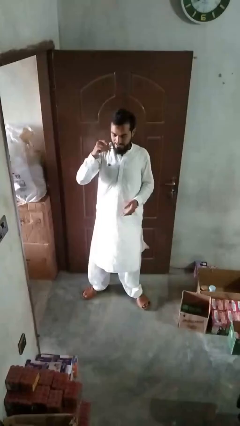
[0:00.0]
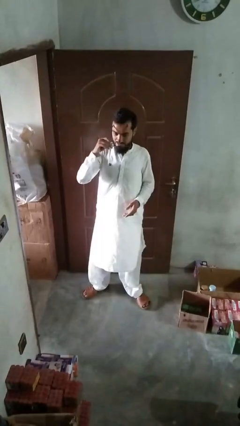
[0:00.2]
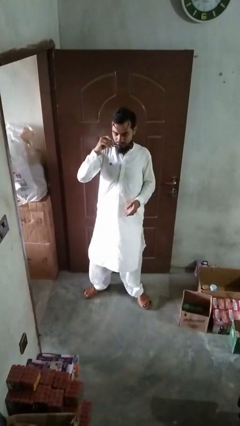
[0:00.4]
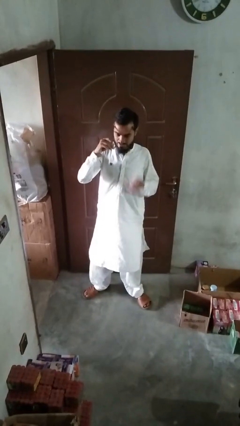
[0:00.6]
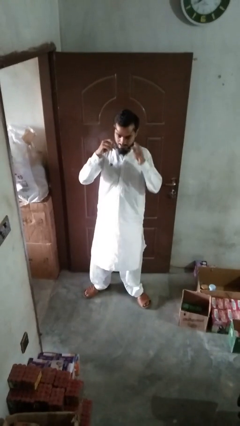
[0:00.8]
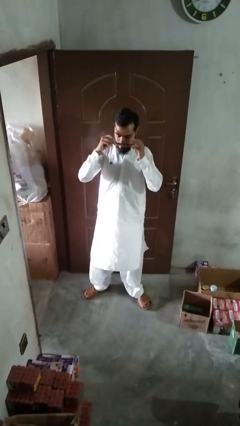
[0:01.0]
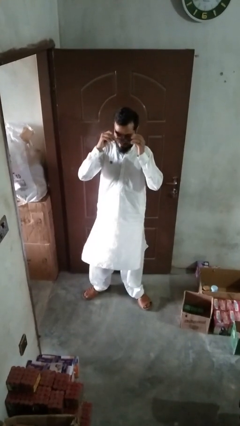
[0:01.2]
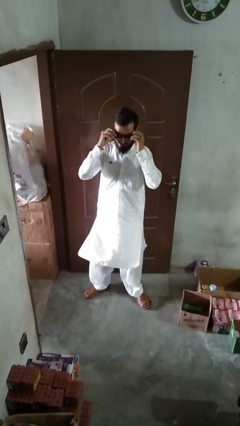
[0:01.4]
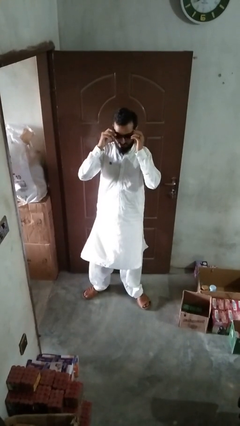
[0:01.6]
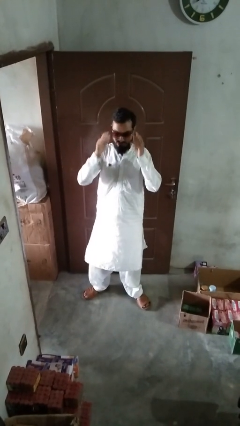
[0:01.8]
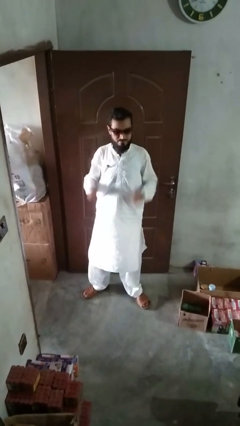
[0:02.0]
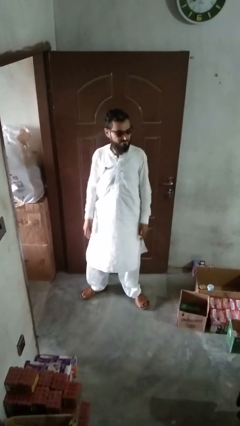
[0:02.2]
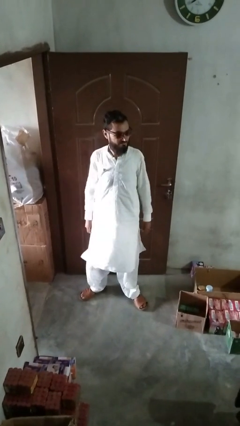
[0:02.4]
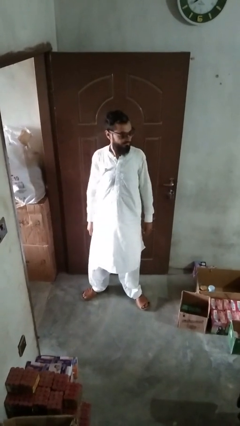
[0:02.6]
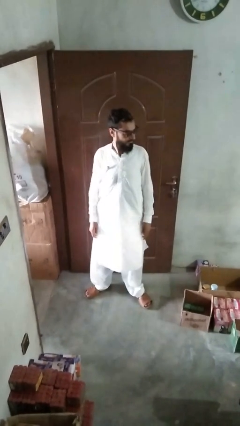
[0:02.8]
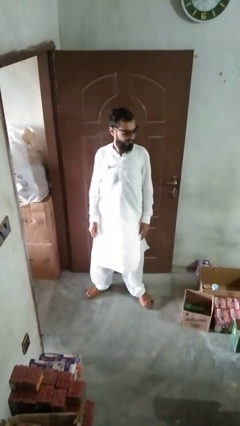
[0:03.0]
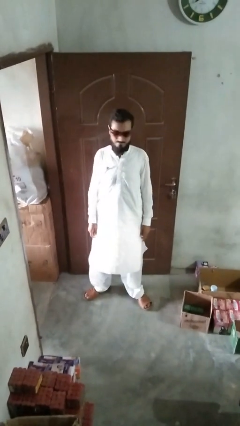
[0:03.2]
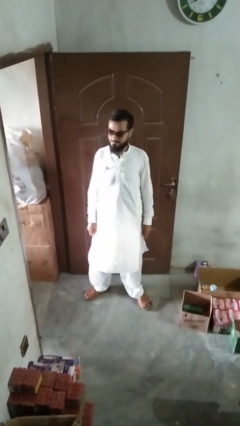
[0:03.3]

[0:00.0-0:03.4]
person puts on sunglasses

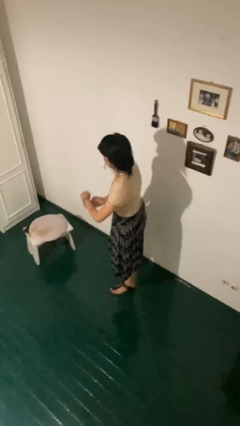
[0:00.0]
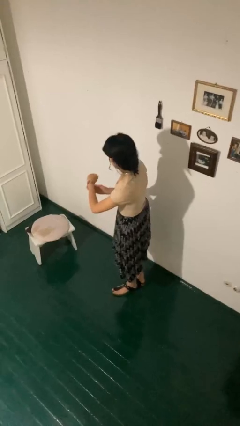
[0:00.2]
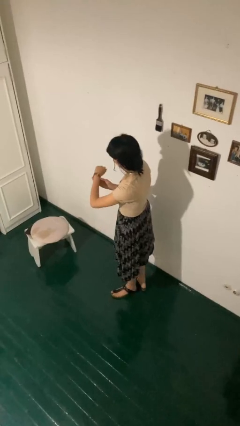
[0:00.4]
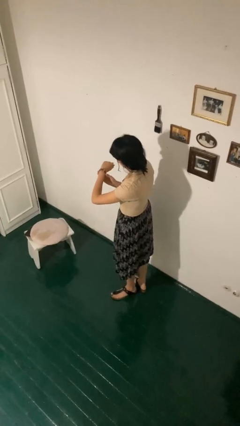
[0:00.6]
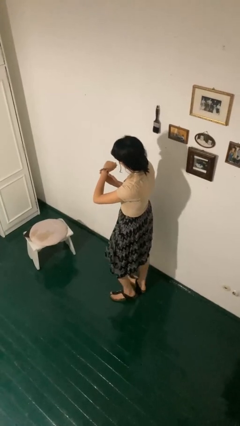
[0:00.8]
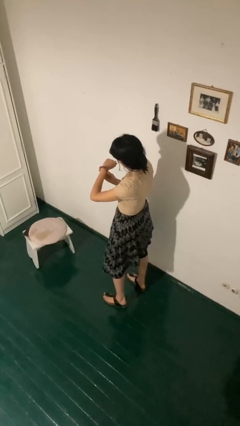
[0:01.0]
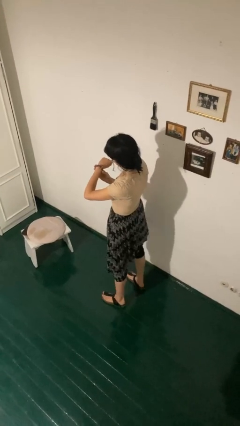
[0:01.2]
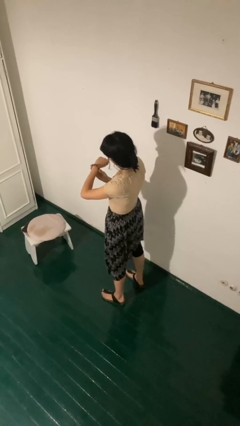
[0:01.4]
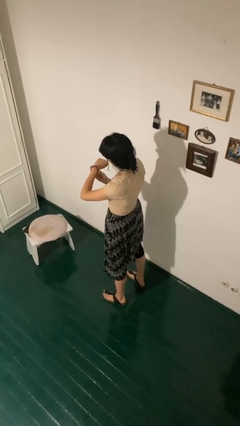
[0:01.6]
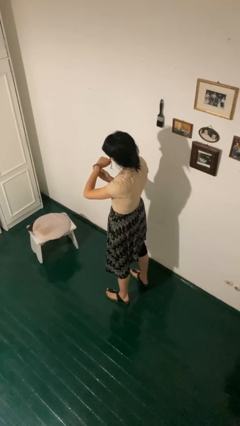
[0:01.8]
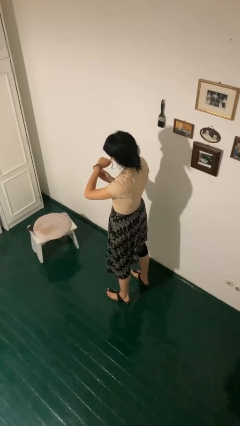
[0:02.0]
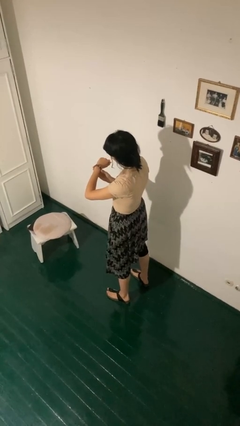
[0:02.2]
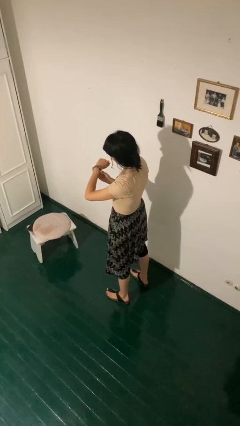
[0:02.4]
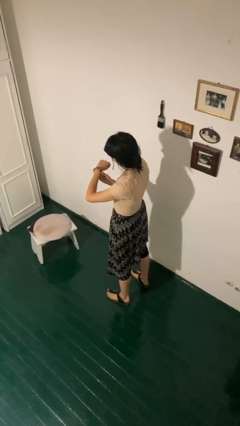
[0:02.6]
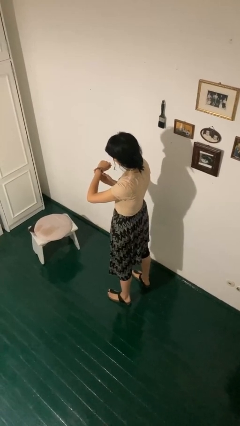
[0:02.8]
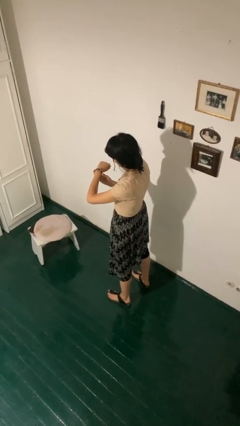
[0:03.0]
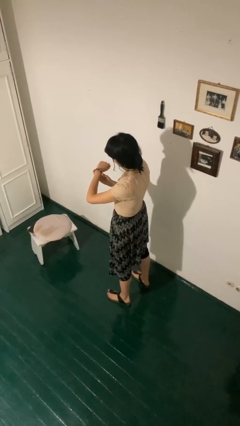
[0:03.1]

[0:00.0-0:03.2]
person looks at wristwatch

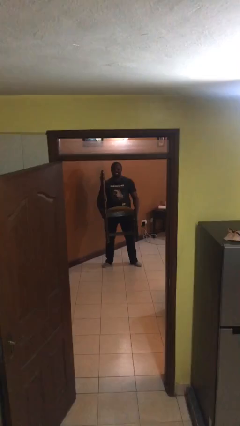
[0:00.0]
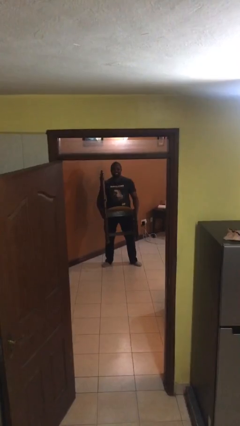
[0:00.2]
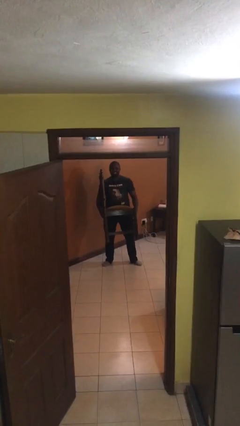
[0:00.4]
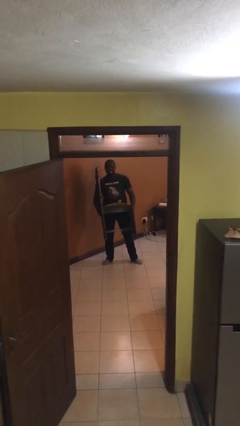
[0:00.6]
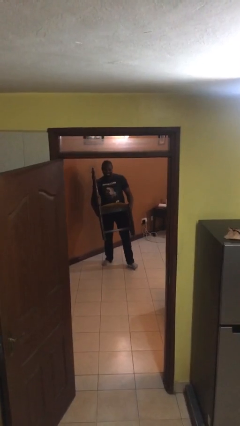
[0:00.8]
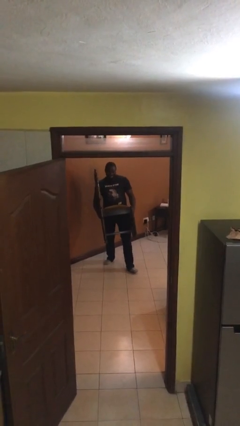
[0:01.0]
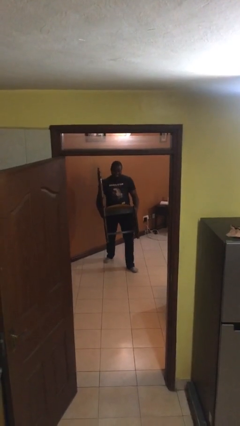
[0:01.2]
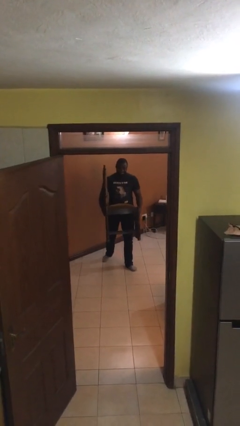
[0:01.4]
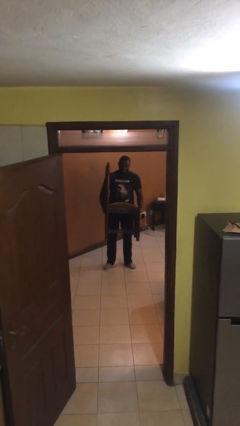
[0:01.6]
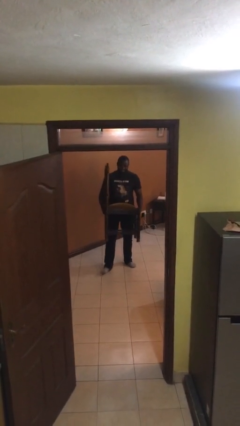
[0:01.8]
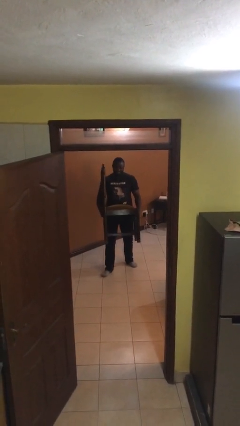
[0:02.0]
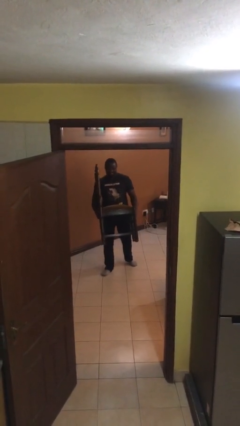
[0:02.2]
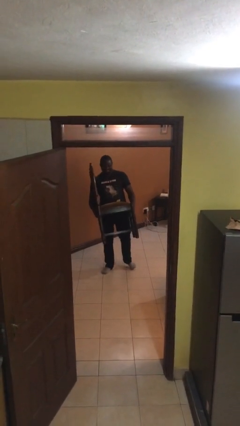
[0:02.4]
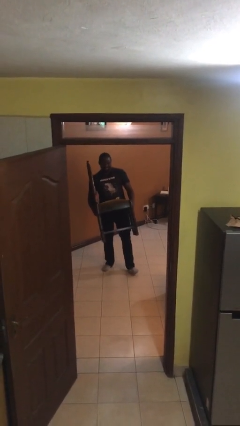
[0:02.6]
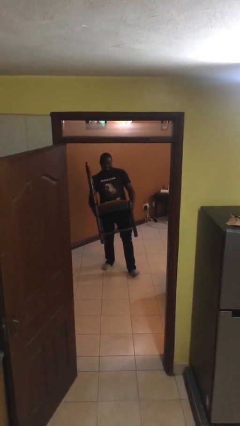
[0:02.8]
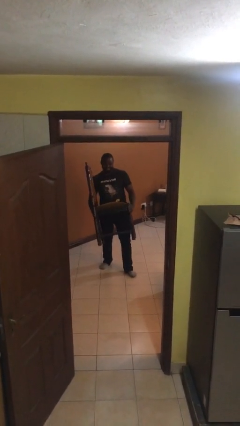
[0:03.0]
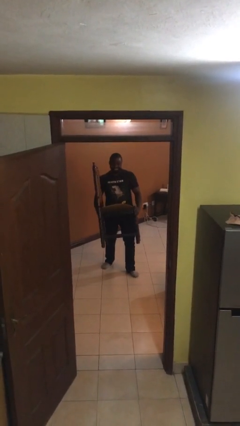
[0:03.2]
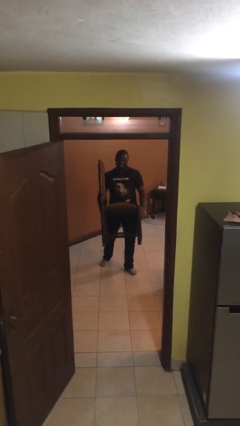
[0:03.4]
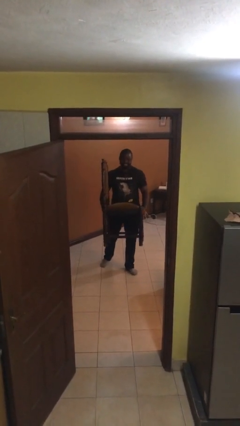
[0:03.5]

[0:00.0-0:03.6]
person carries heavy object

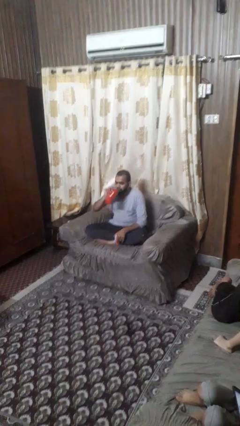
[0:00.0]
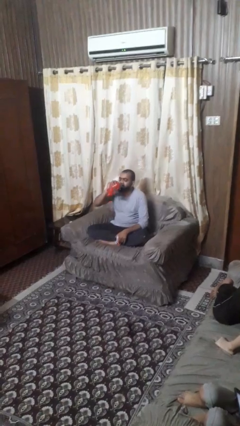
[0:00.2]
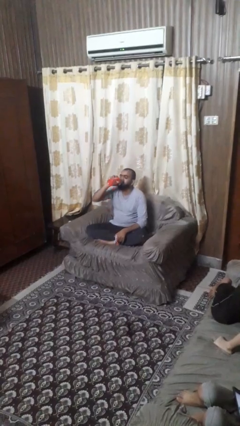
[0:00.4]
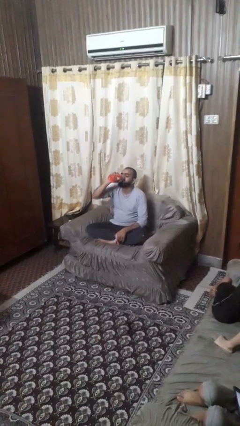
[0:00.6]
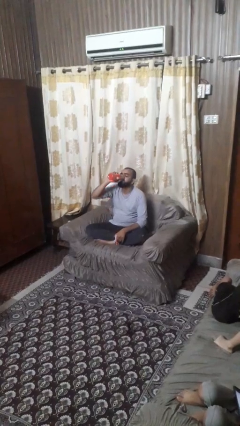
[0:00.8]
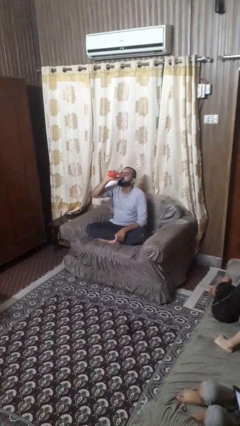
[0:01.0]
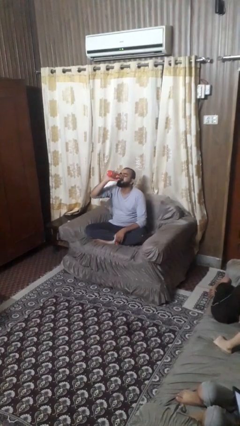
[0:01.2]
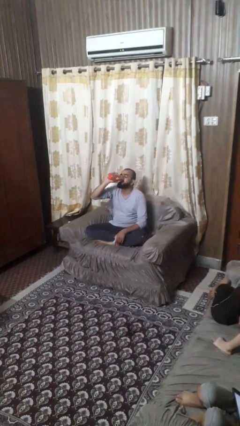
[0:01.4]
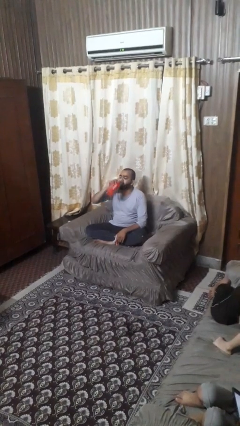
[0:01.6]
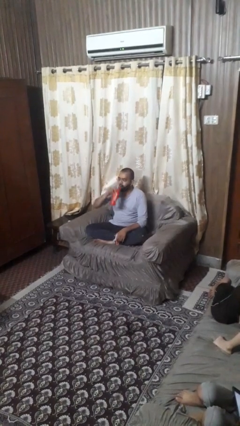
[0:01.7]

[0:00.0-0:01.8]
person drinks from bottle

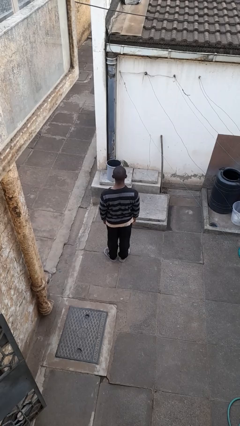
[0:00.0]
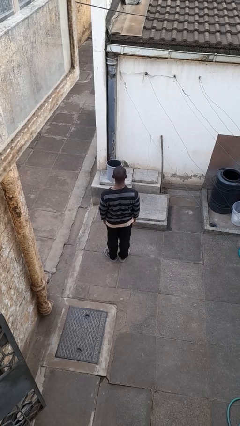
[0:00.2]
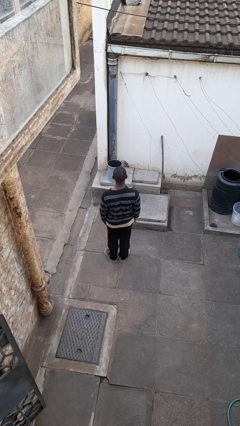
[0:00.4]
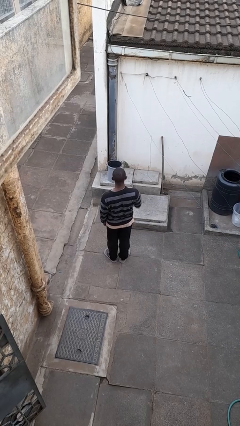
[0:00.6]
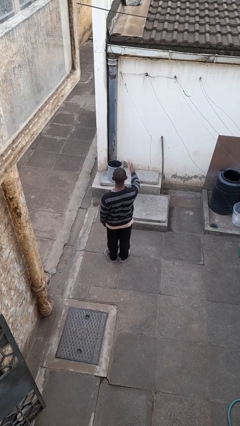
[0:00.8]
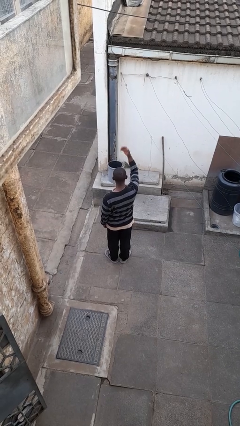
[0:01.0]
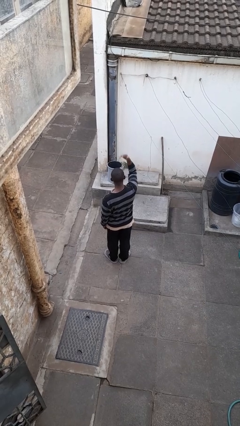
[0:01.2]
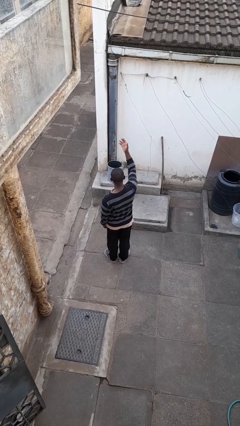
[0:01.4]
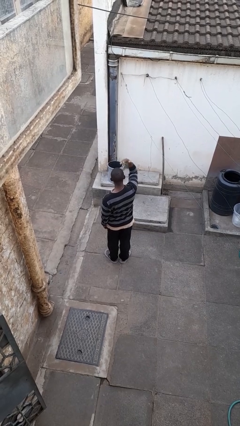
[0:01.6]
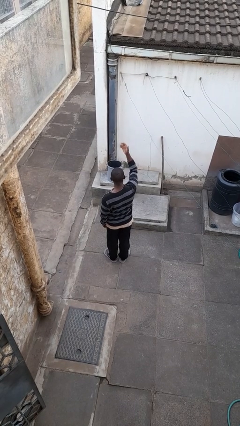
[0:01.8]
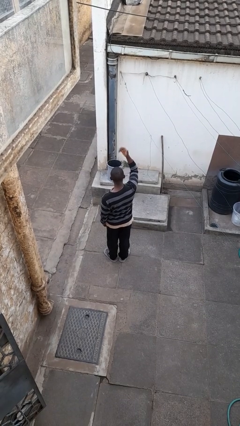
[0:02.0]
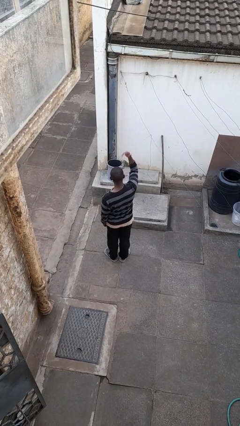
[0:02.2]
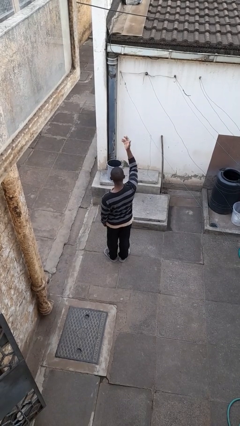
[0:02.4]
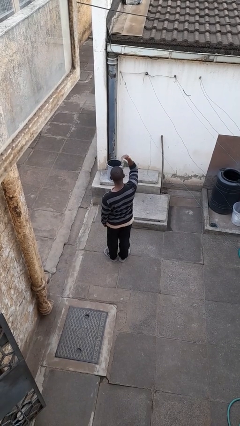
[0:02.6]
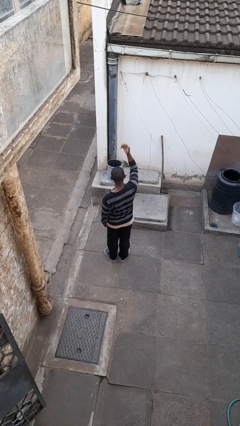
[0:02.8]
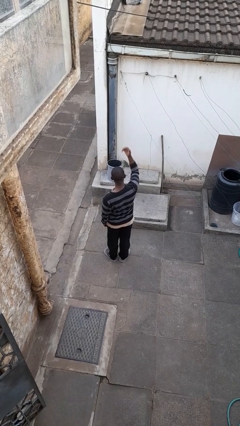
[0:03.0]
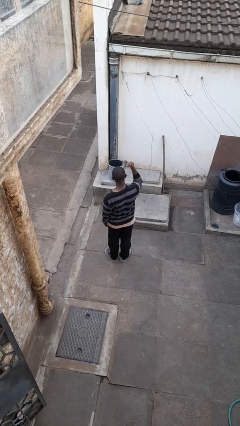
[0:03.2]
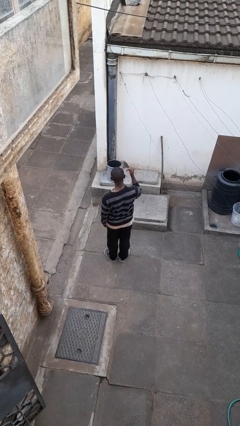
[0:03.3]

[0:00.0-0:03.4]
person gestures come here

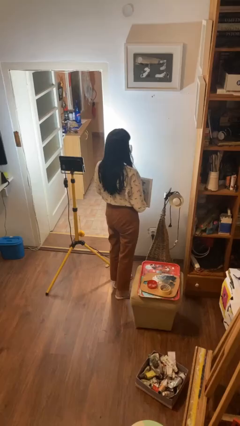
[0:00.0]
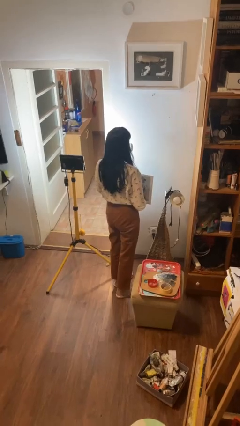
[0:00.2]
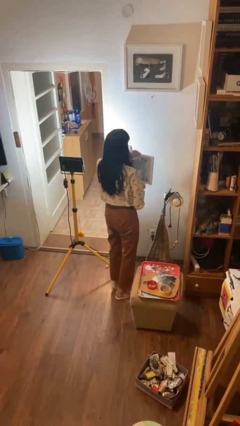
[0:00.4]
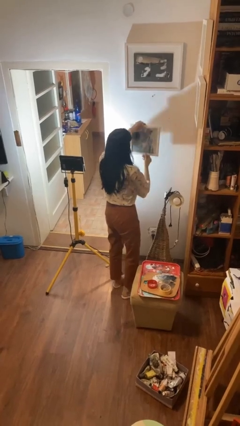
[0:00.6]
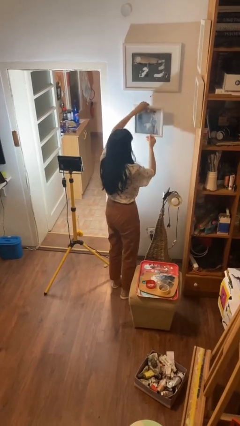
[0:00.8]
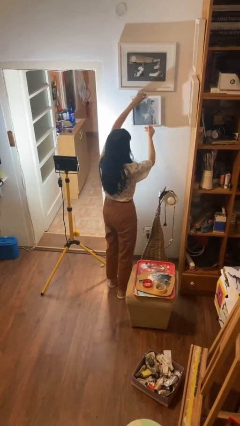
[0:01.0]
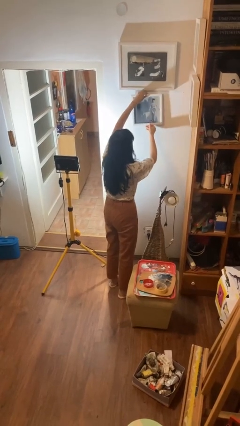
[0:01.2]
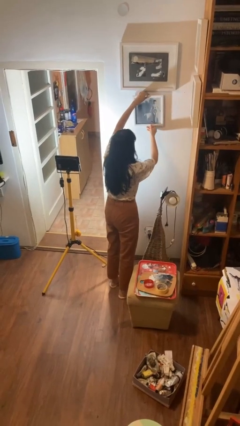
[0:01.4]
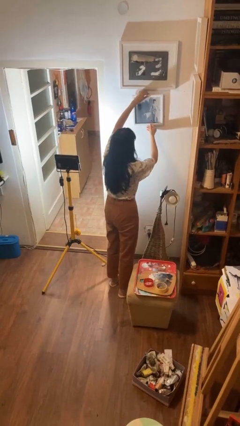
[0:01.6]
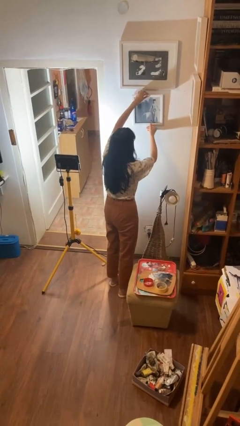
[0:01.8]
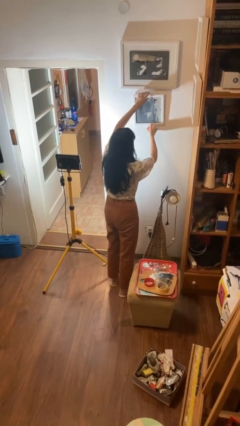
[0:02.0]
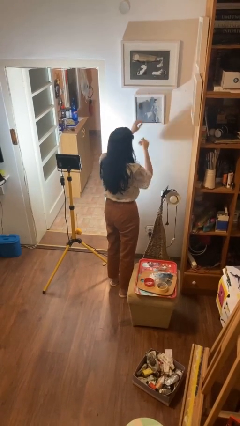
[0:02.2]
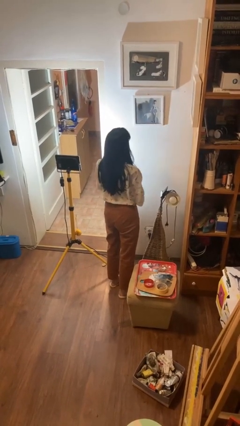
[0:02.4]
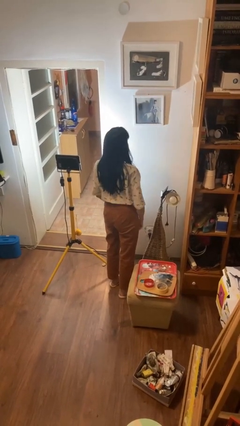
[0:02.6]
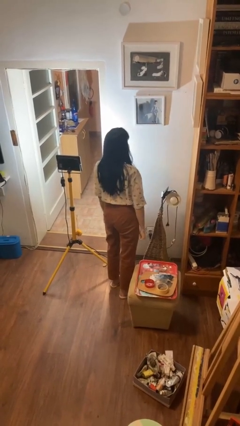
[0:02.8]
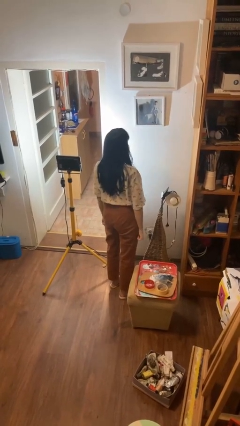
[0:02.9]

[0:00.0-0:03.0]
person puts up picture frame
